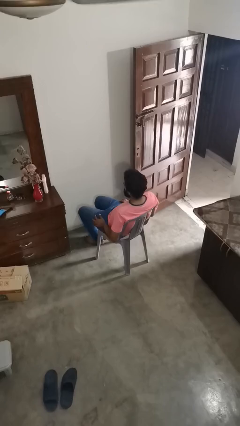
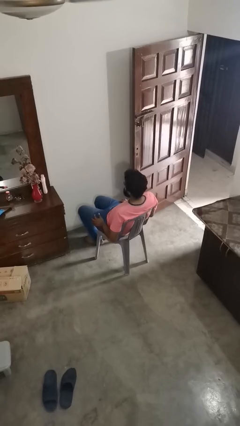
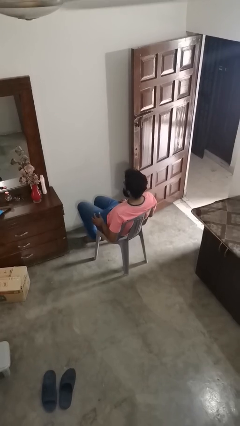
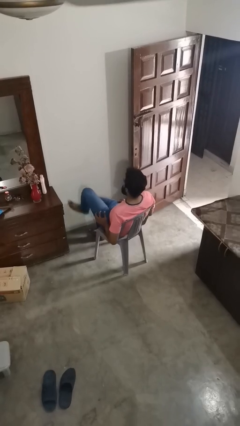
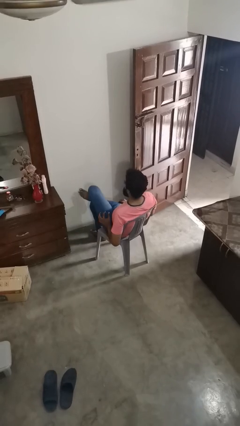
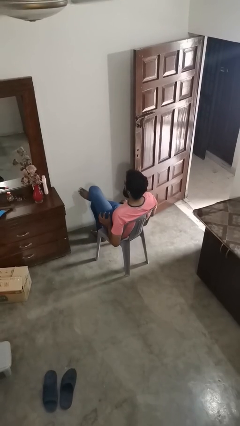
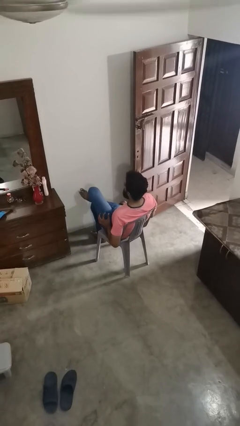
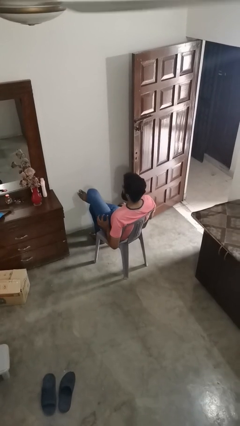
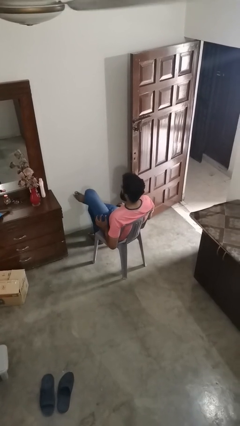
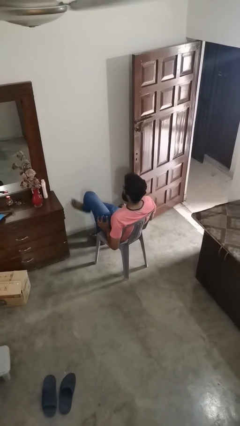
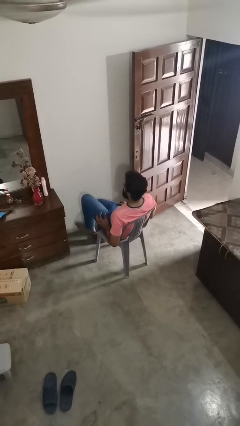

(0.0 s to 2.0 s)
person crosses legs

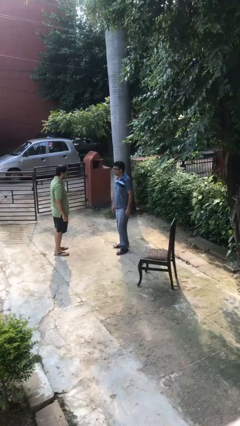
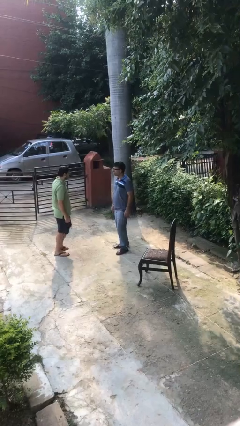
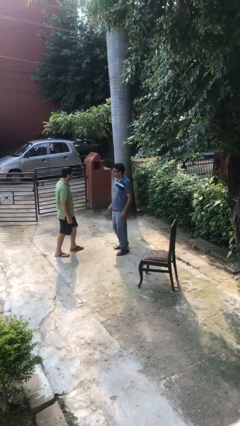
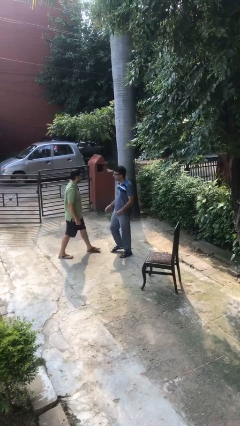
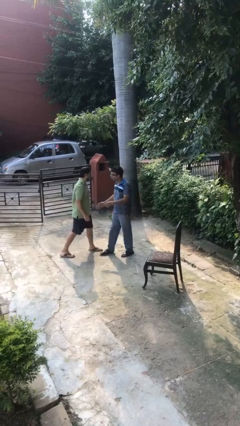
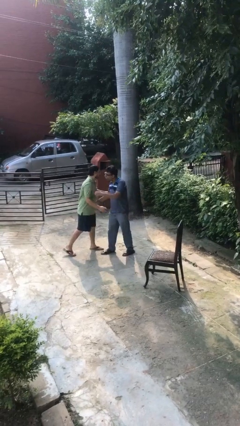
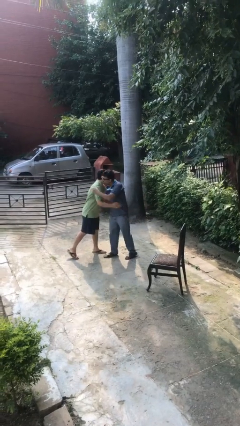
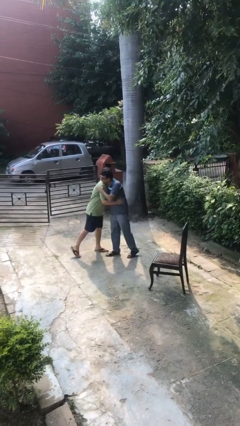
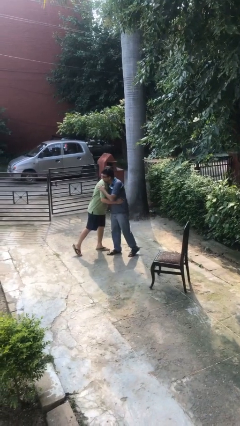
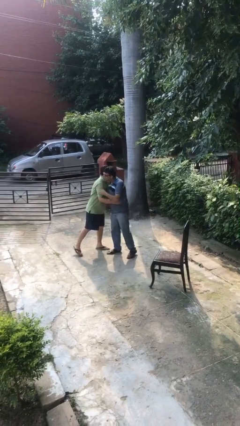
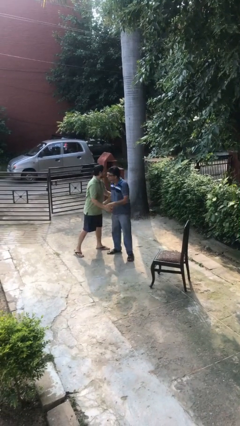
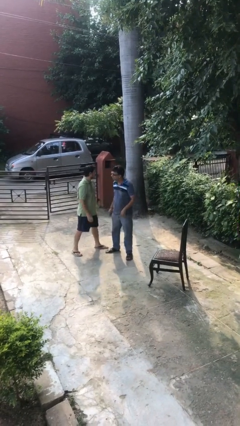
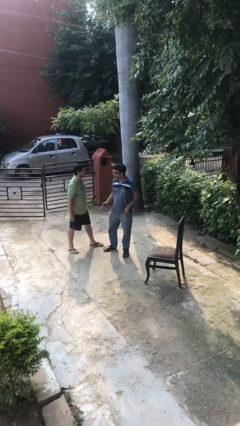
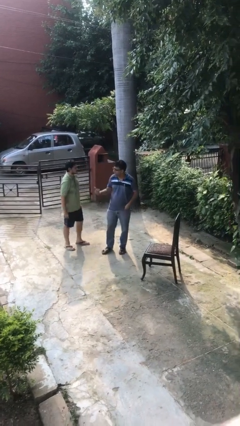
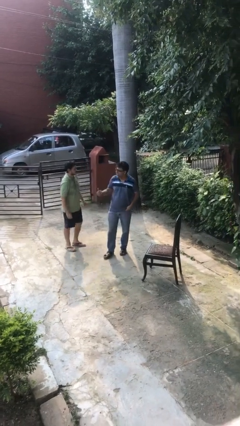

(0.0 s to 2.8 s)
person embraces person

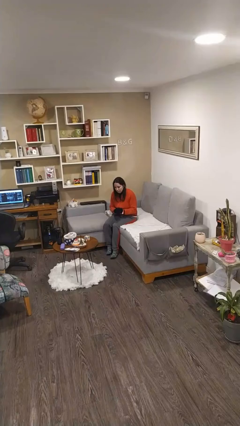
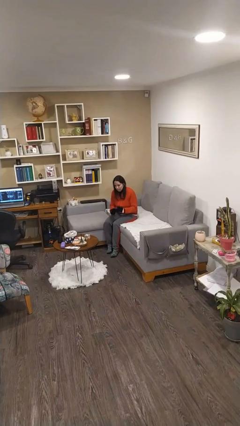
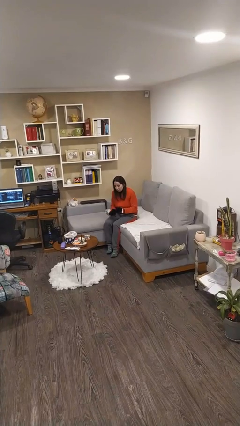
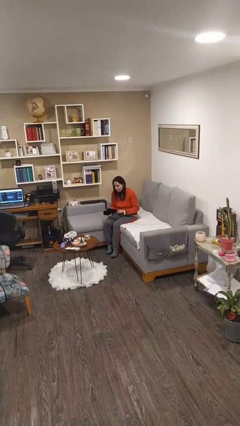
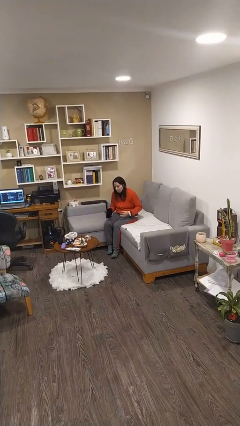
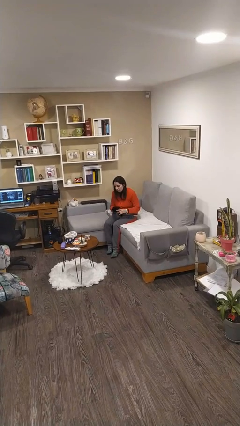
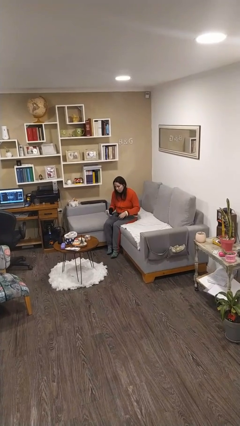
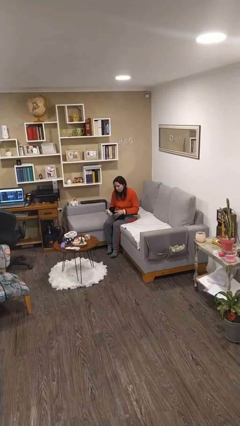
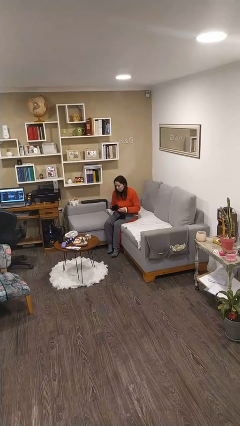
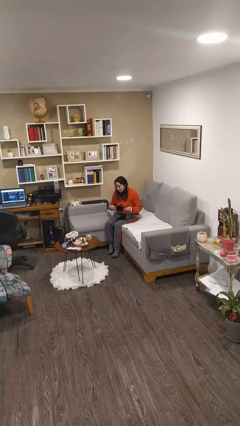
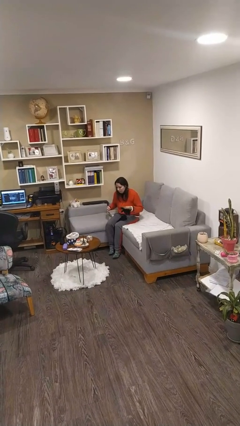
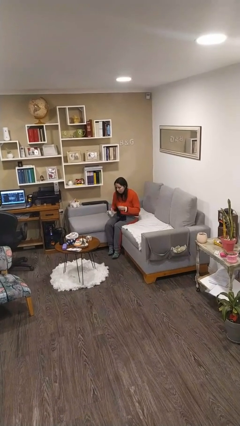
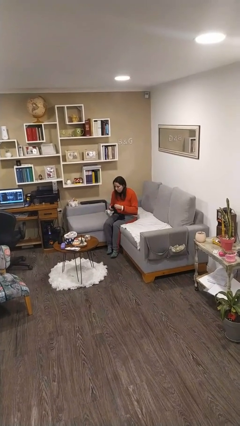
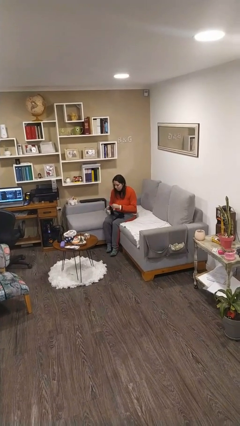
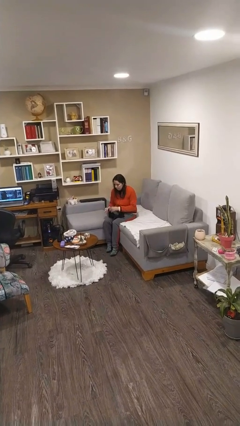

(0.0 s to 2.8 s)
person takes off gloves

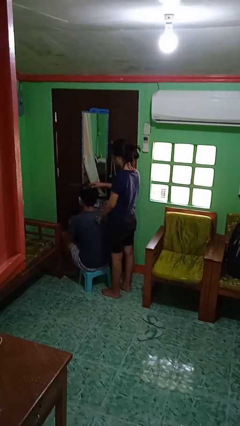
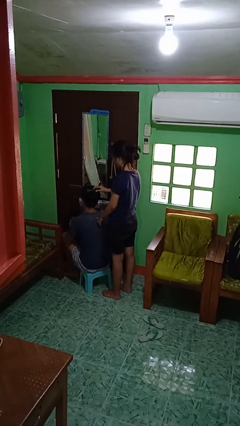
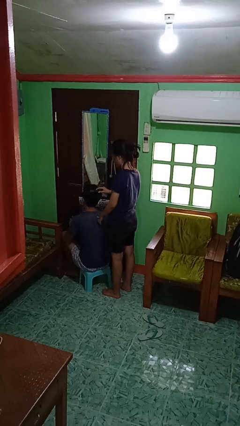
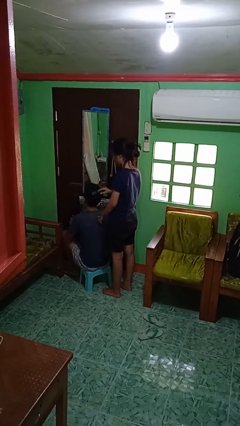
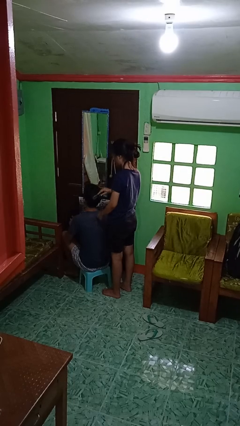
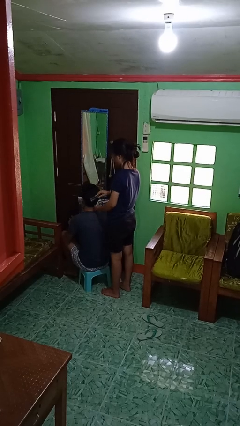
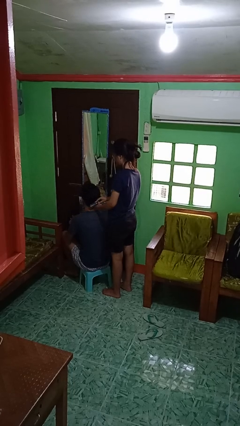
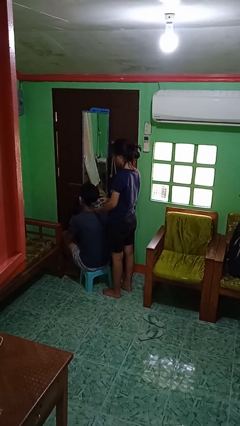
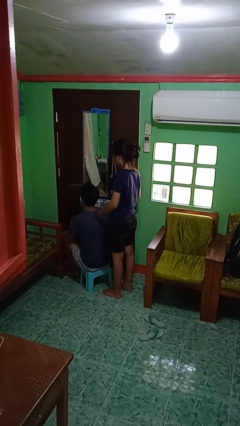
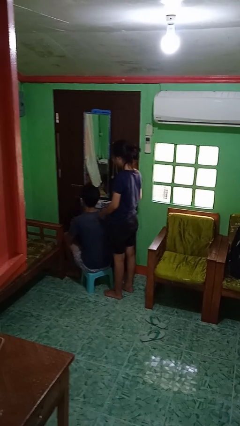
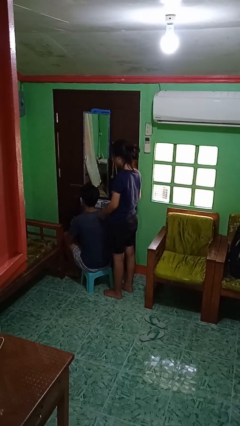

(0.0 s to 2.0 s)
person brushes hair of person

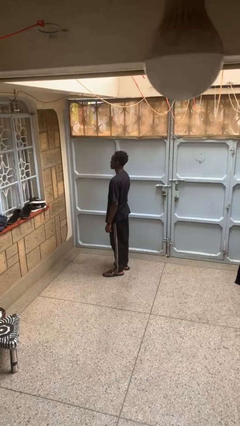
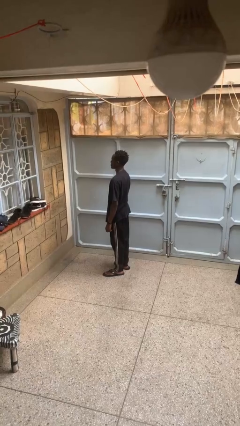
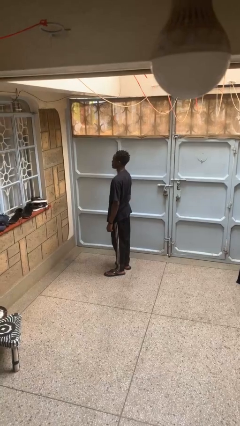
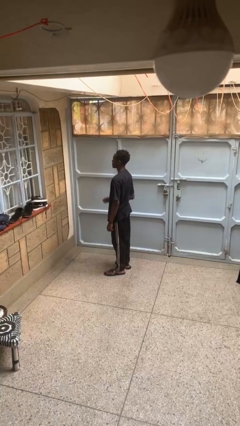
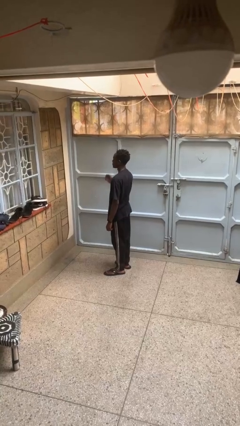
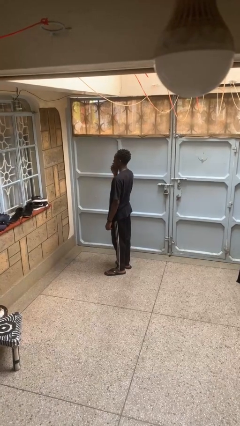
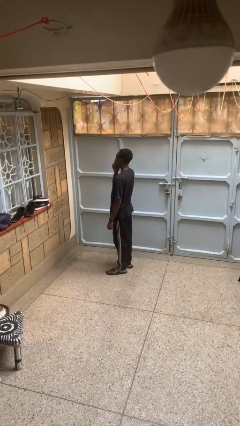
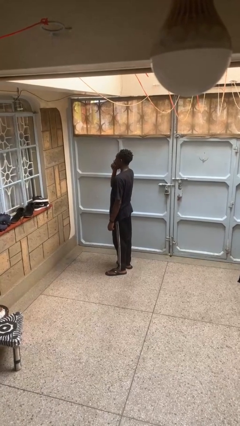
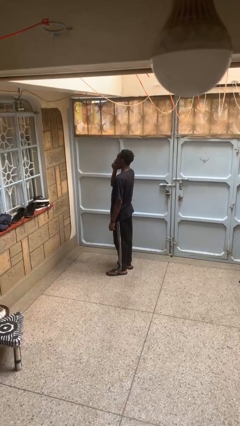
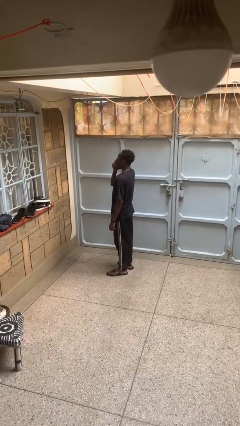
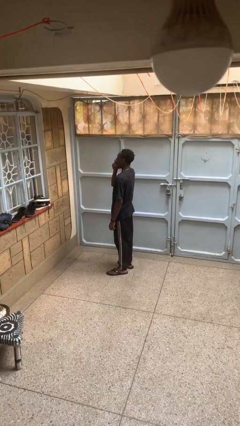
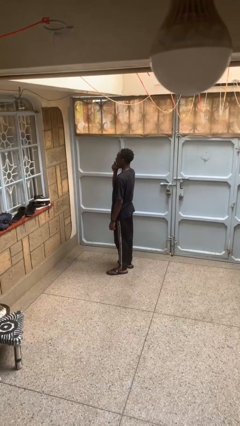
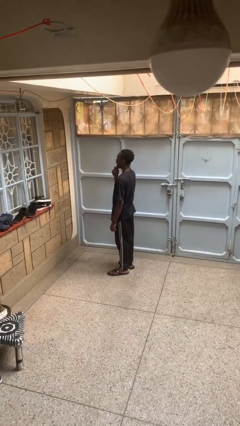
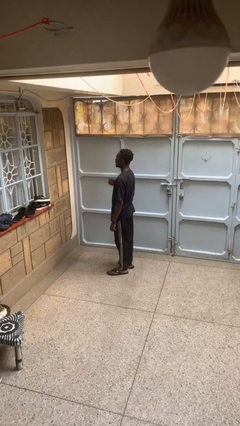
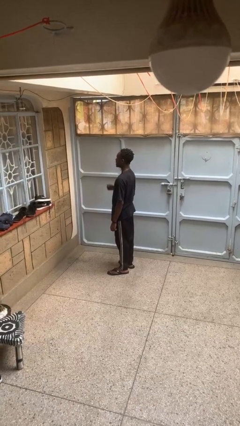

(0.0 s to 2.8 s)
person yawns

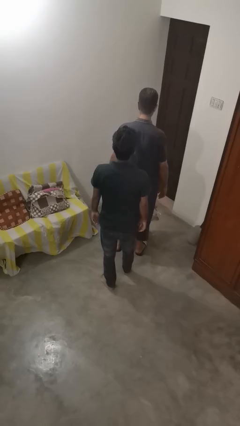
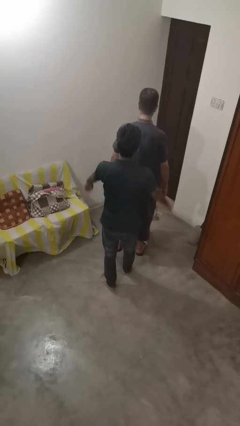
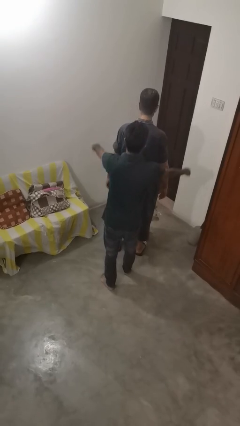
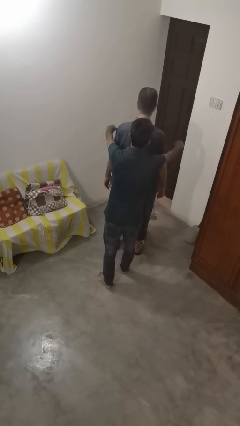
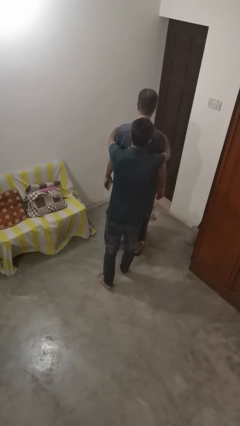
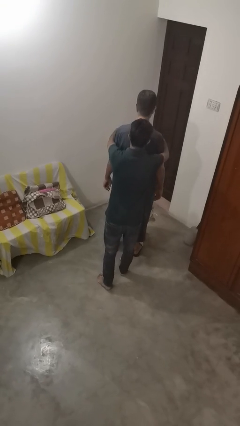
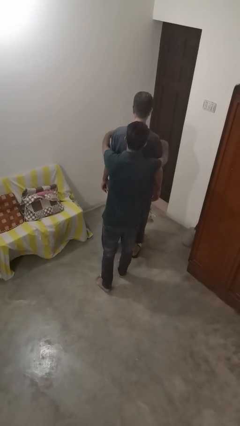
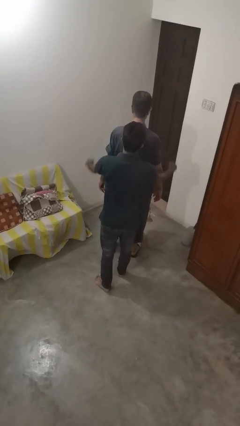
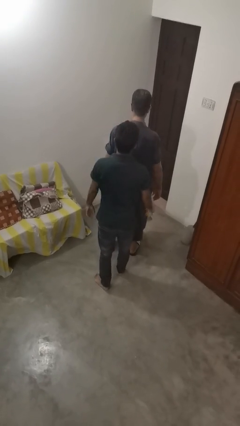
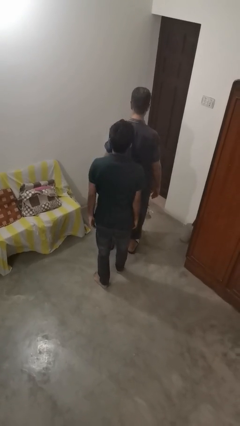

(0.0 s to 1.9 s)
person hugs person from behind

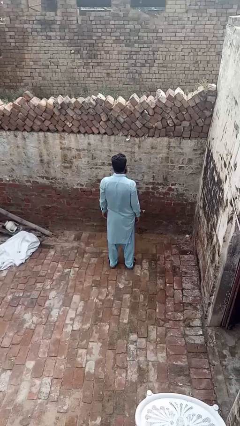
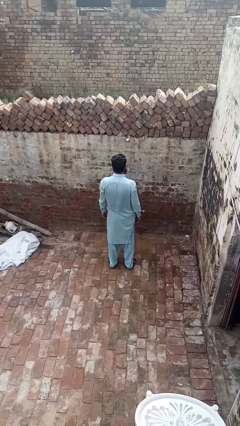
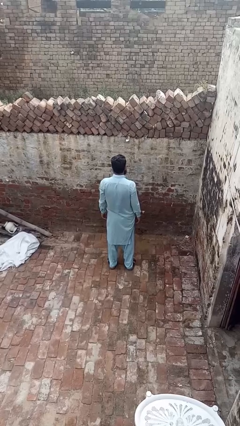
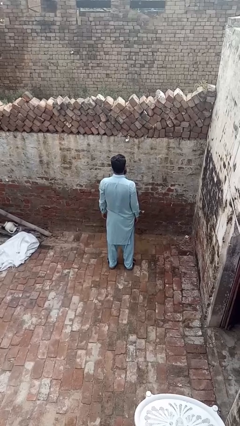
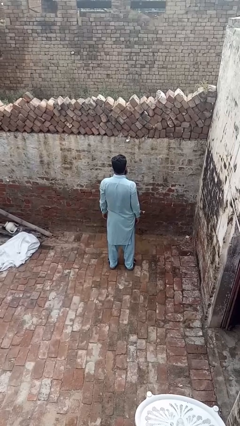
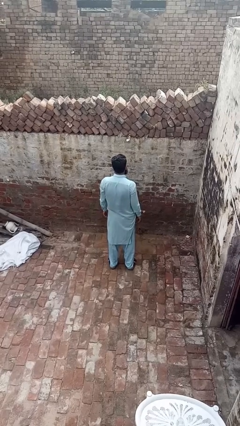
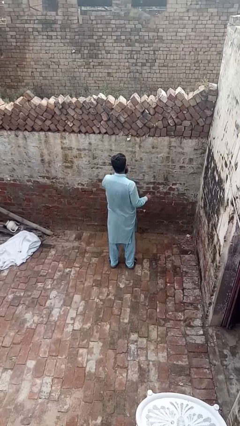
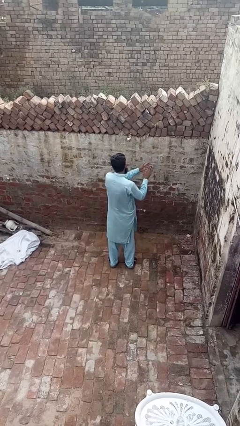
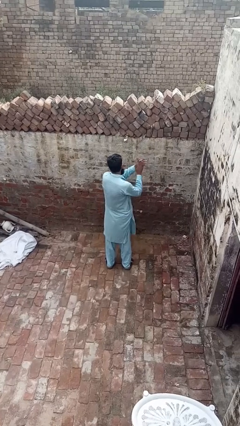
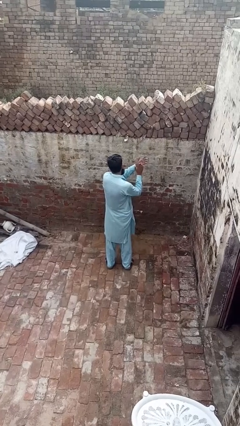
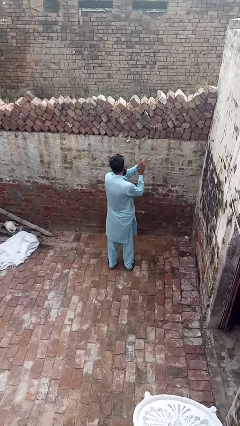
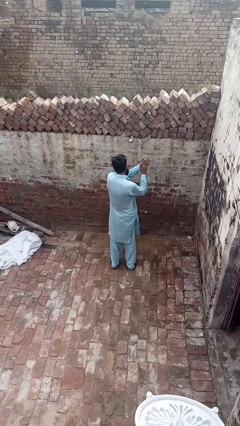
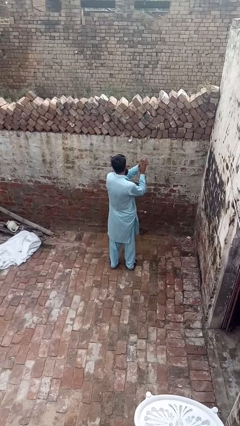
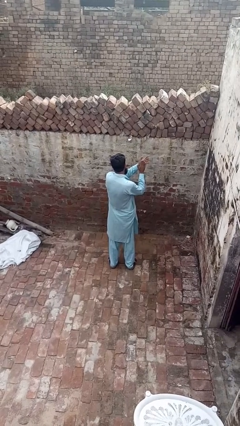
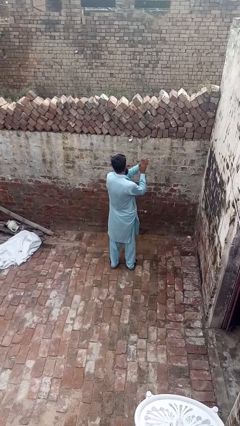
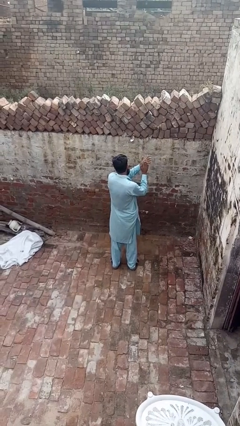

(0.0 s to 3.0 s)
person claps hands
